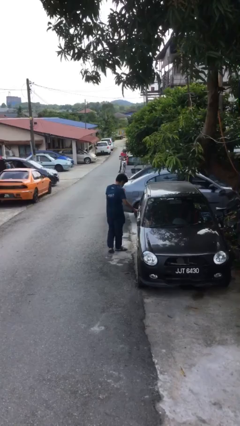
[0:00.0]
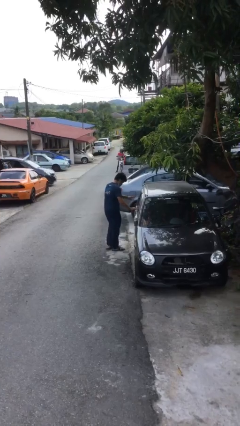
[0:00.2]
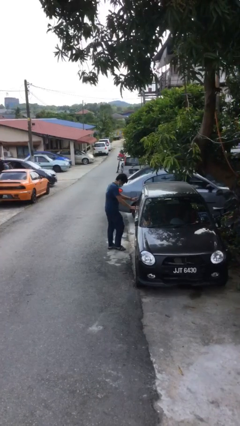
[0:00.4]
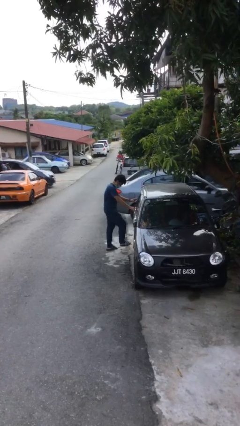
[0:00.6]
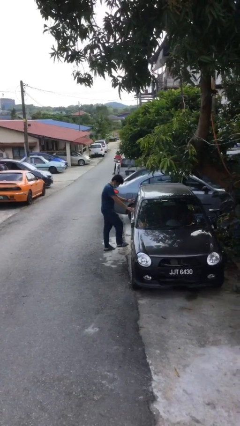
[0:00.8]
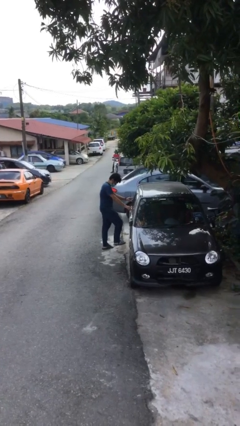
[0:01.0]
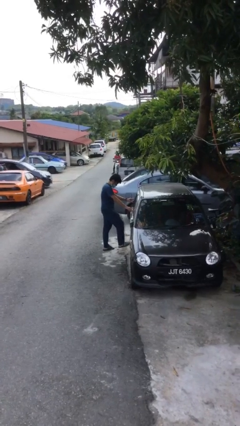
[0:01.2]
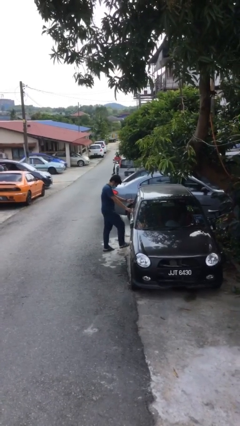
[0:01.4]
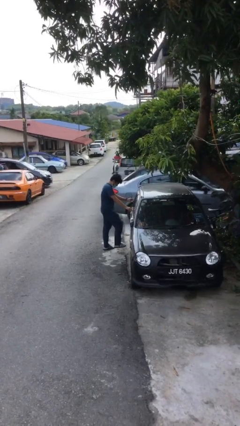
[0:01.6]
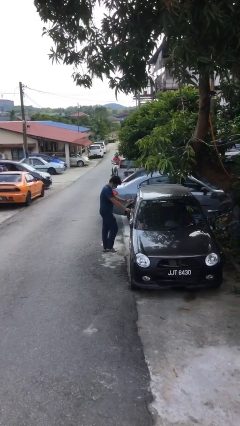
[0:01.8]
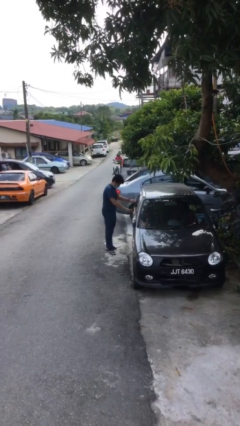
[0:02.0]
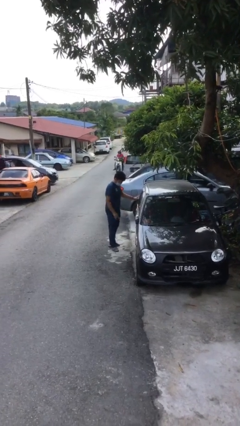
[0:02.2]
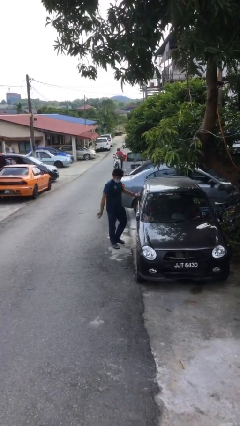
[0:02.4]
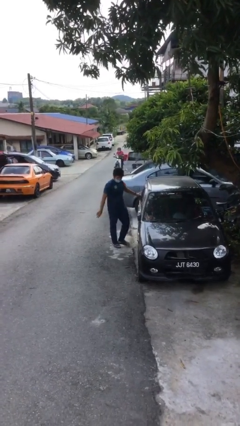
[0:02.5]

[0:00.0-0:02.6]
person kicks car tires

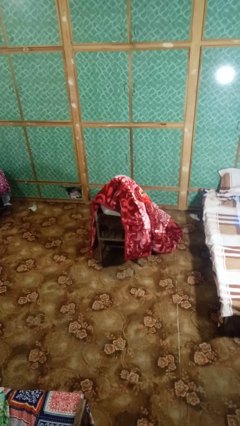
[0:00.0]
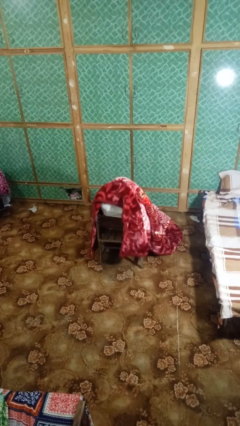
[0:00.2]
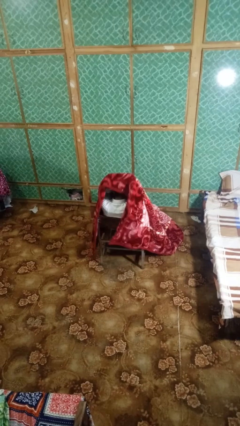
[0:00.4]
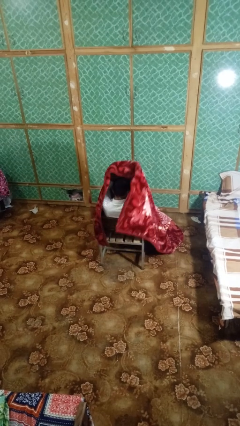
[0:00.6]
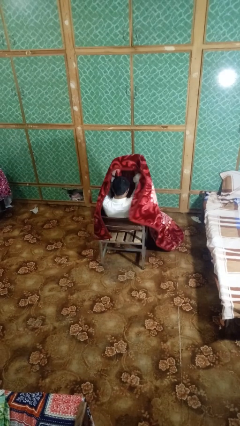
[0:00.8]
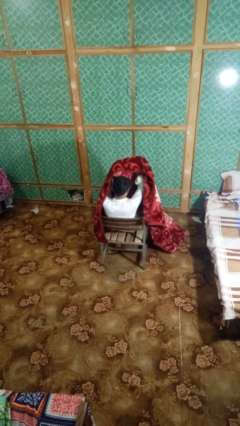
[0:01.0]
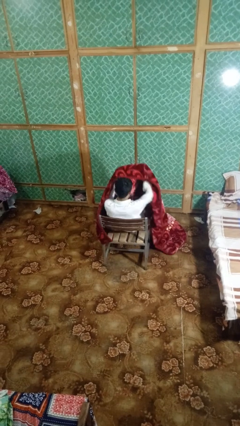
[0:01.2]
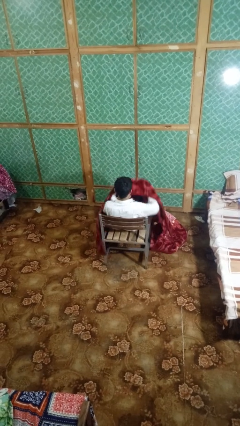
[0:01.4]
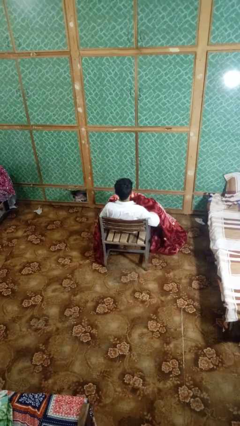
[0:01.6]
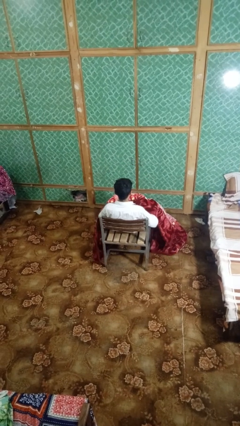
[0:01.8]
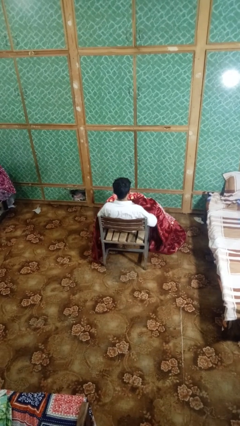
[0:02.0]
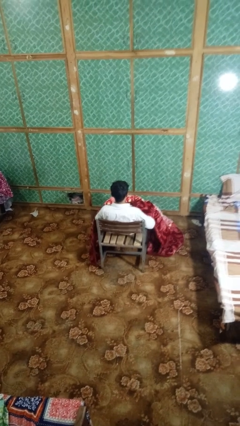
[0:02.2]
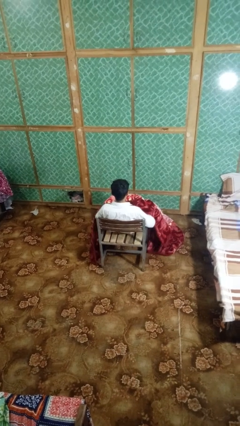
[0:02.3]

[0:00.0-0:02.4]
person uncovers with blanket

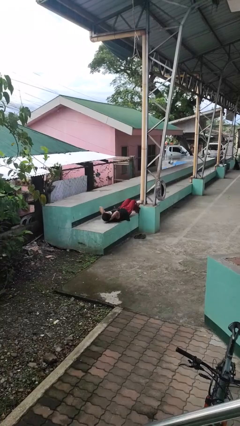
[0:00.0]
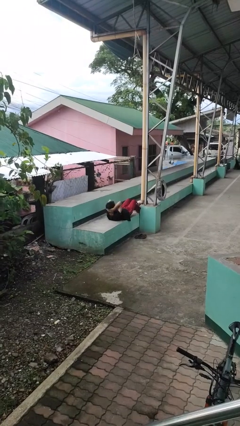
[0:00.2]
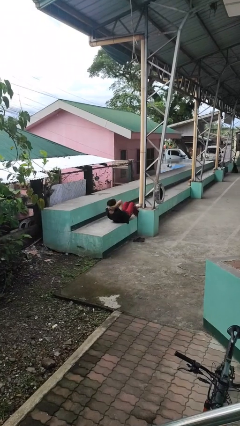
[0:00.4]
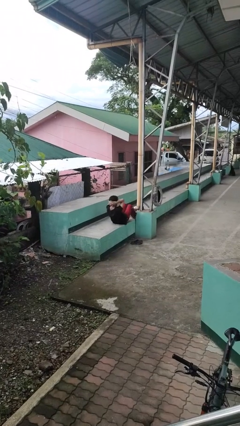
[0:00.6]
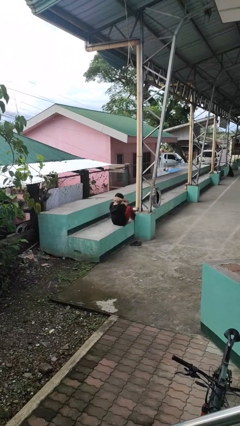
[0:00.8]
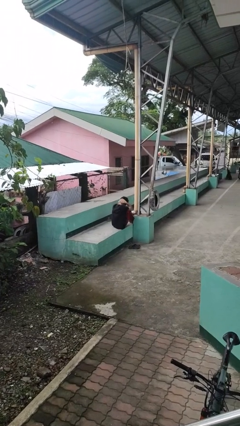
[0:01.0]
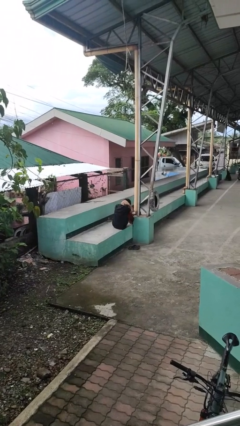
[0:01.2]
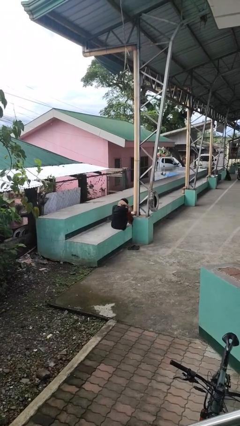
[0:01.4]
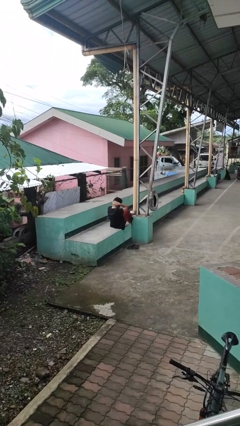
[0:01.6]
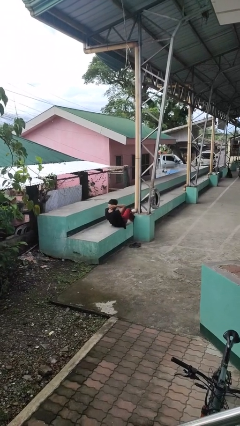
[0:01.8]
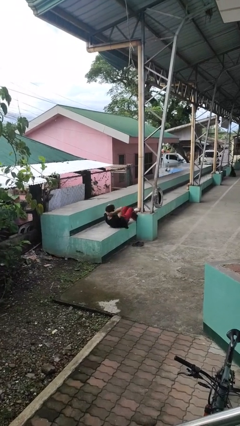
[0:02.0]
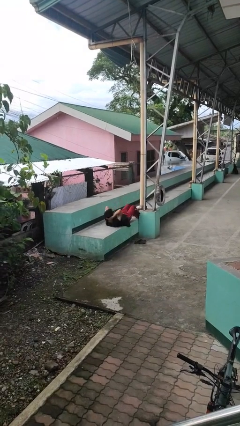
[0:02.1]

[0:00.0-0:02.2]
person exercises with situp

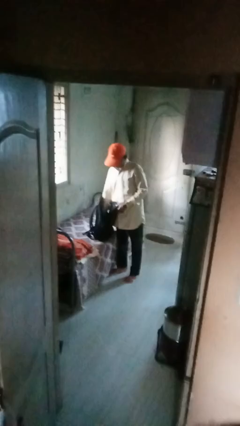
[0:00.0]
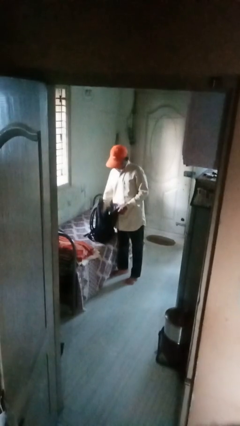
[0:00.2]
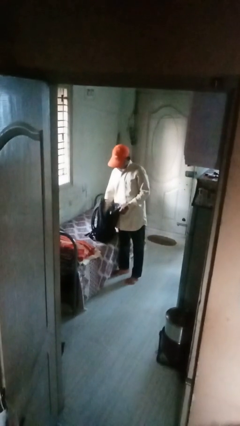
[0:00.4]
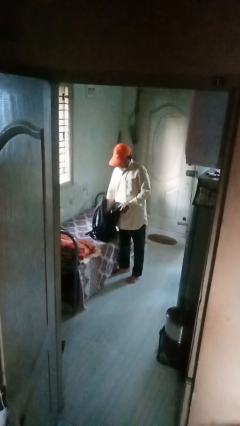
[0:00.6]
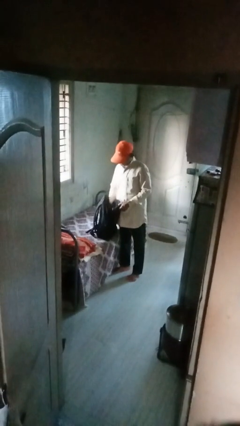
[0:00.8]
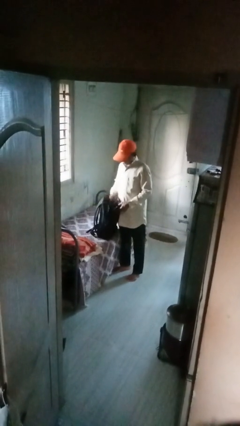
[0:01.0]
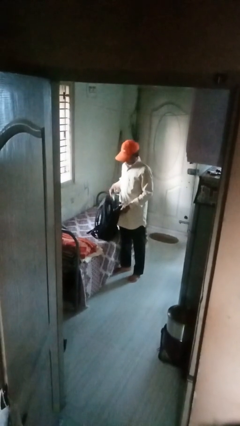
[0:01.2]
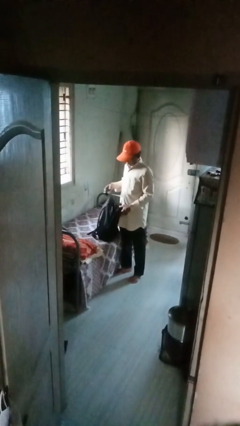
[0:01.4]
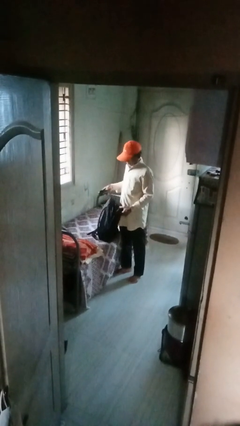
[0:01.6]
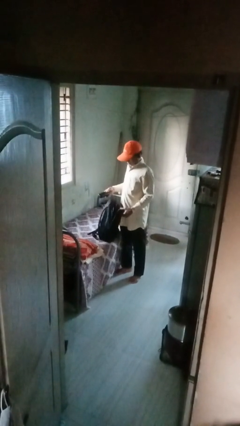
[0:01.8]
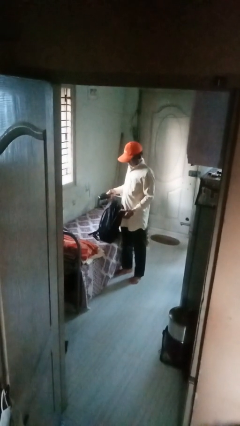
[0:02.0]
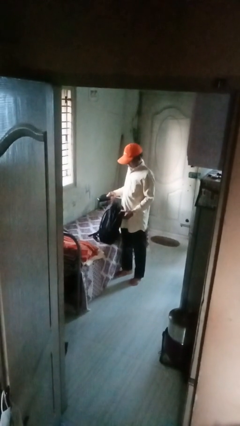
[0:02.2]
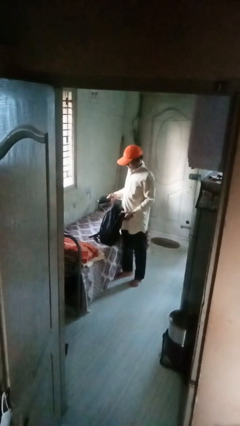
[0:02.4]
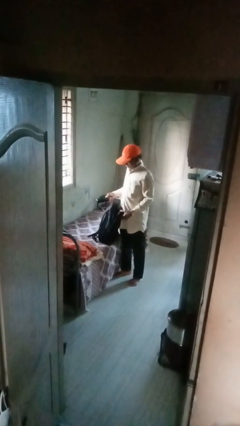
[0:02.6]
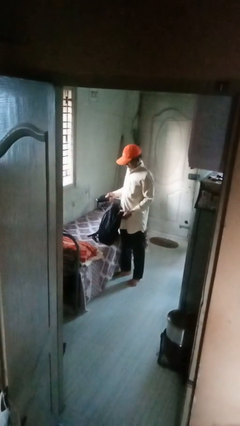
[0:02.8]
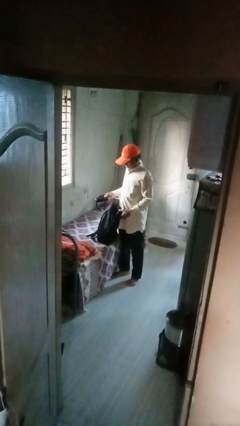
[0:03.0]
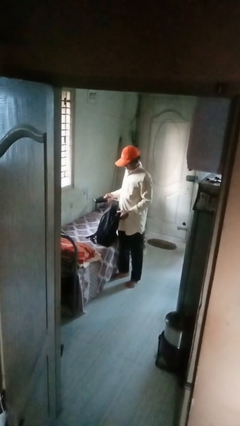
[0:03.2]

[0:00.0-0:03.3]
person takes object from backpack

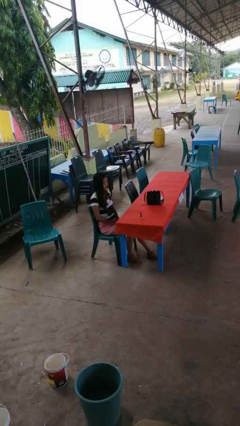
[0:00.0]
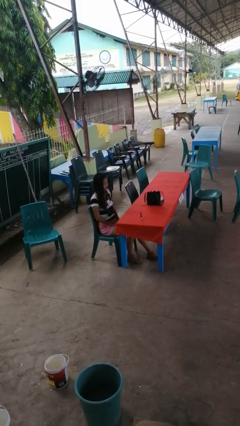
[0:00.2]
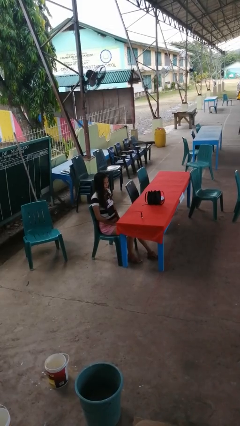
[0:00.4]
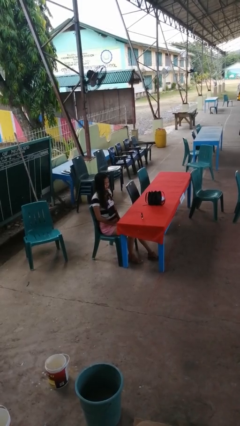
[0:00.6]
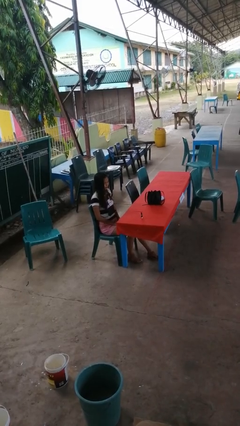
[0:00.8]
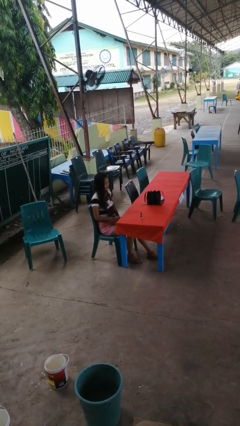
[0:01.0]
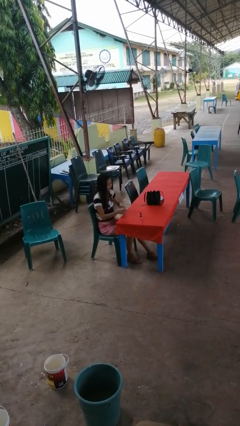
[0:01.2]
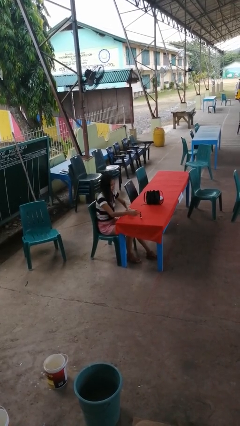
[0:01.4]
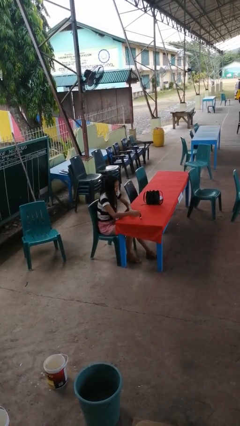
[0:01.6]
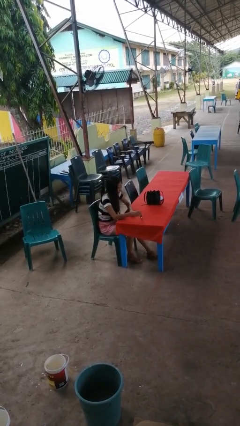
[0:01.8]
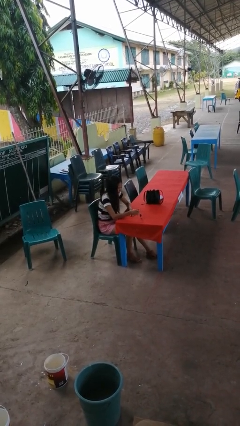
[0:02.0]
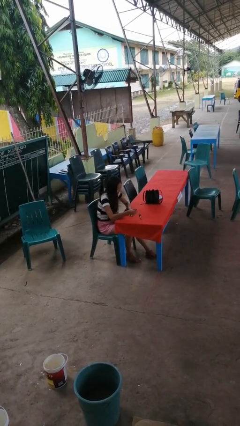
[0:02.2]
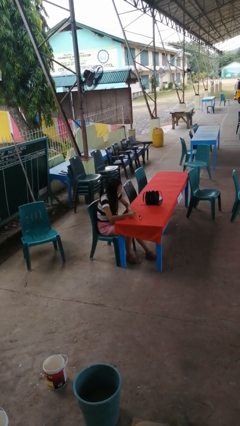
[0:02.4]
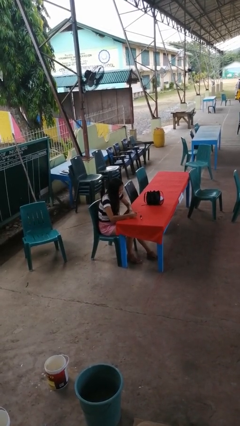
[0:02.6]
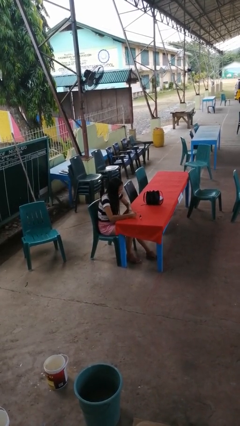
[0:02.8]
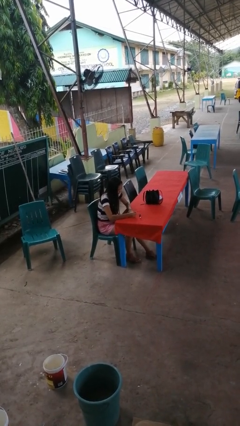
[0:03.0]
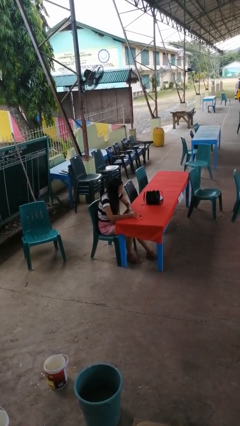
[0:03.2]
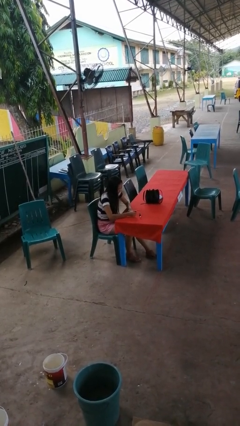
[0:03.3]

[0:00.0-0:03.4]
person paints fingernails

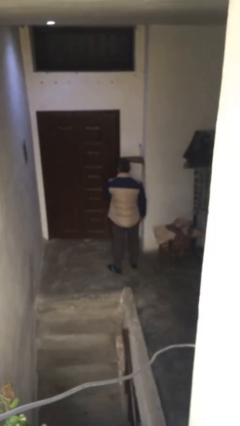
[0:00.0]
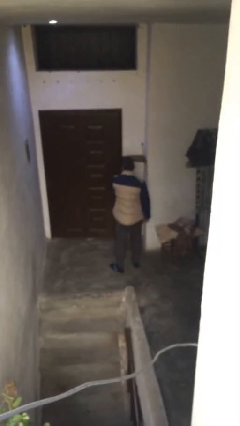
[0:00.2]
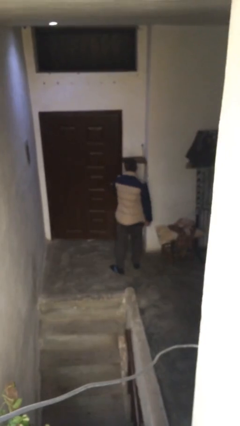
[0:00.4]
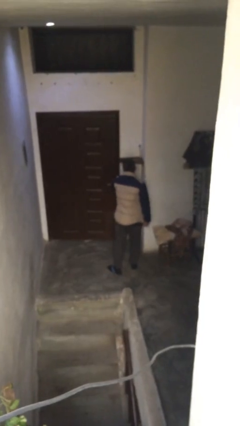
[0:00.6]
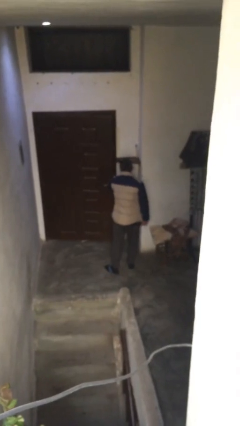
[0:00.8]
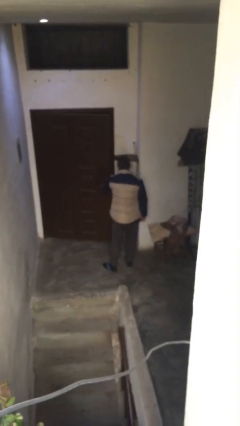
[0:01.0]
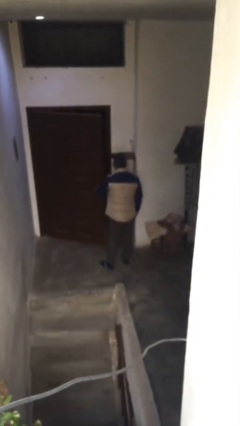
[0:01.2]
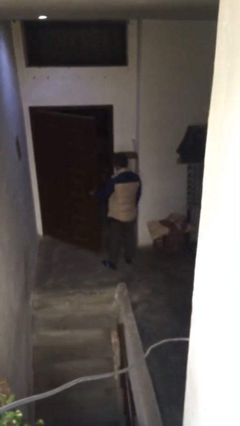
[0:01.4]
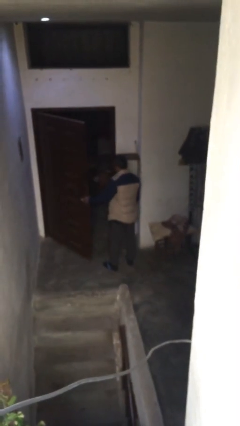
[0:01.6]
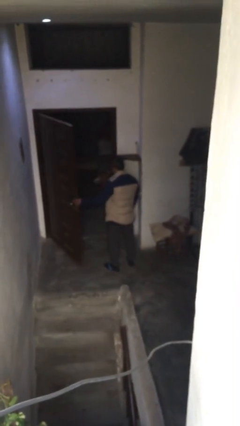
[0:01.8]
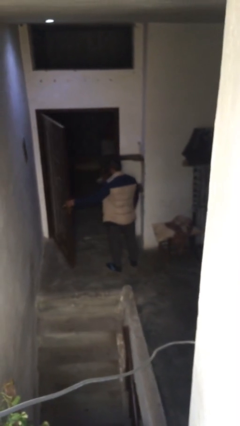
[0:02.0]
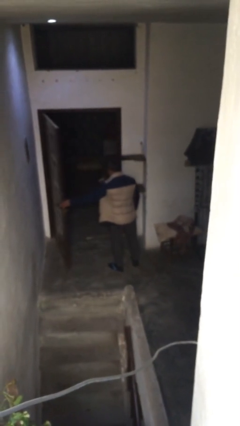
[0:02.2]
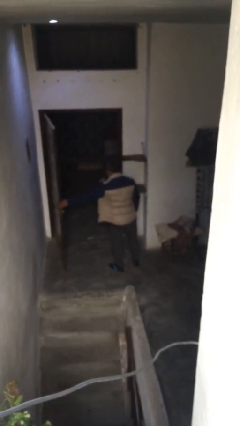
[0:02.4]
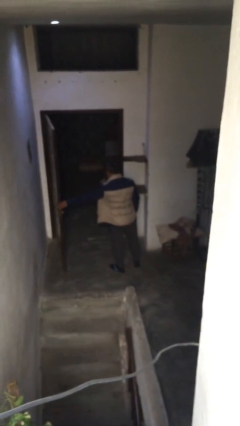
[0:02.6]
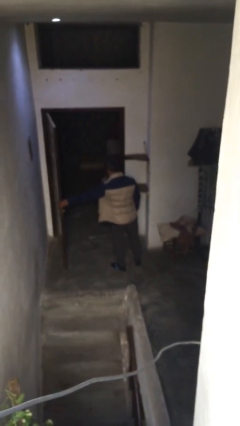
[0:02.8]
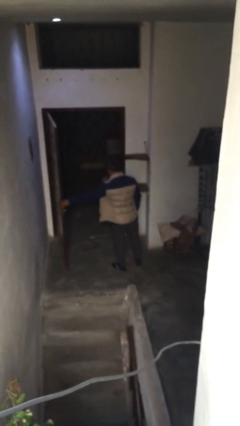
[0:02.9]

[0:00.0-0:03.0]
person opens facility door
